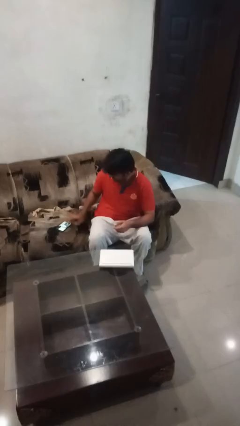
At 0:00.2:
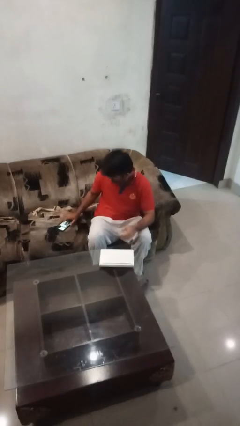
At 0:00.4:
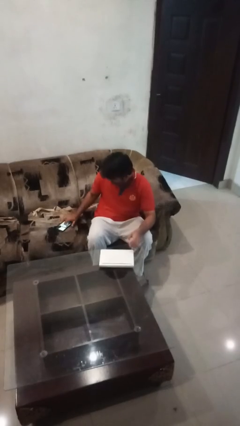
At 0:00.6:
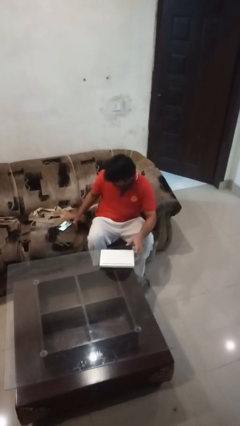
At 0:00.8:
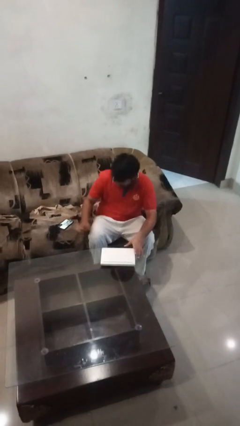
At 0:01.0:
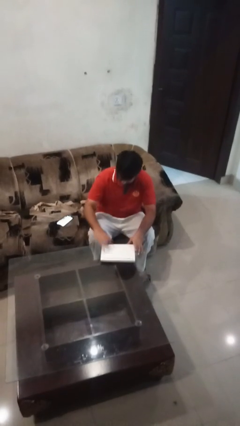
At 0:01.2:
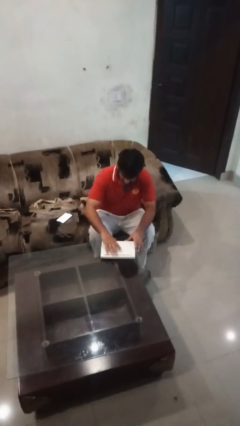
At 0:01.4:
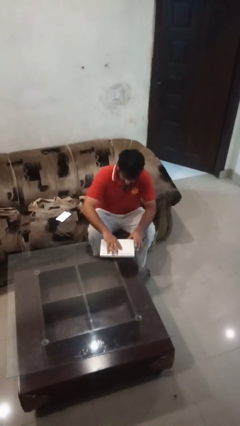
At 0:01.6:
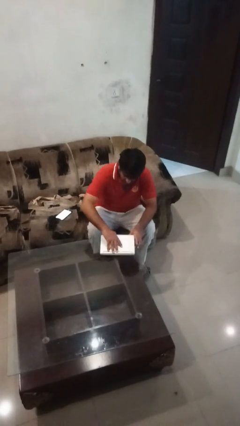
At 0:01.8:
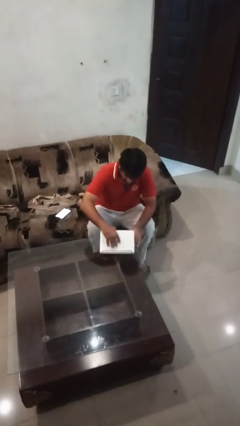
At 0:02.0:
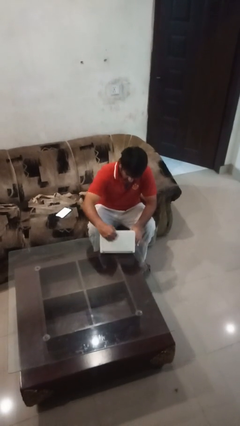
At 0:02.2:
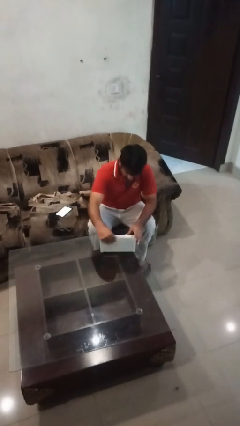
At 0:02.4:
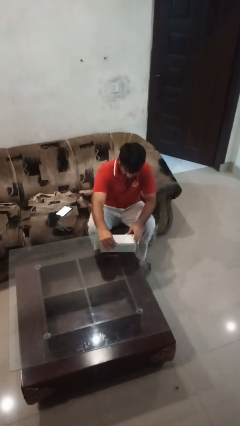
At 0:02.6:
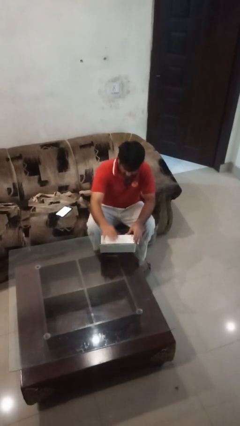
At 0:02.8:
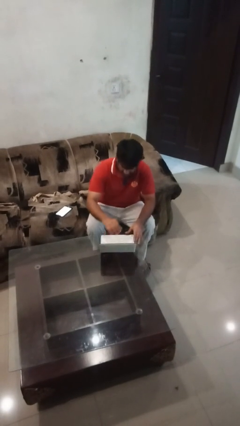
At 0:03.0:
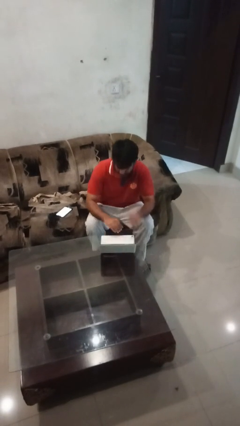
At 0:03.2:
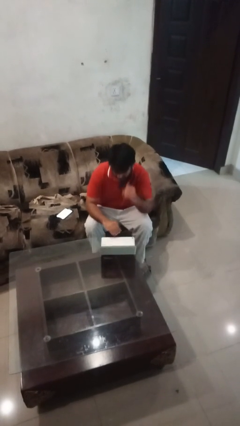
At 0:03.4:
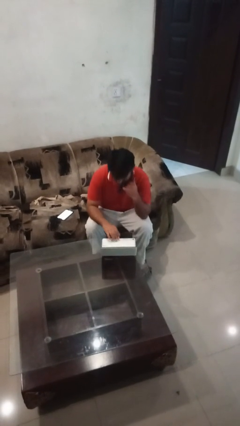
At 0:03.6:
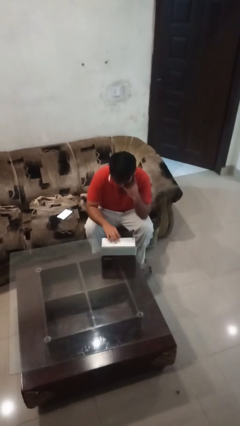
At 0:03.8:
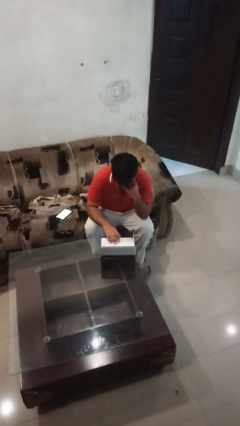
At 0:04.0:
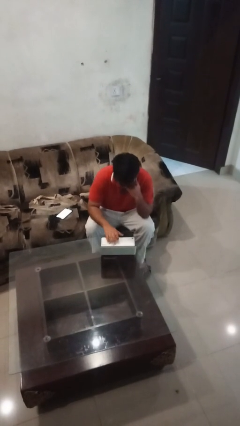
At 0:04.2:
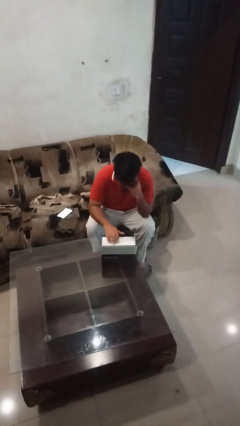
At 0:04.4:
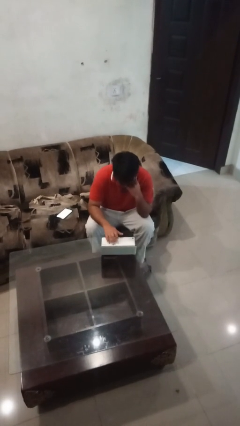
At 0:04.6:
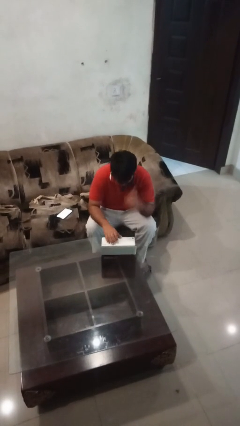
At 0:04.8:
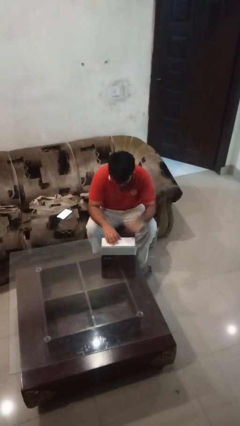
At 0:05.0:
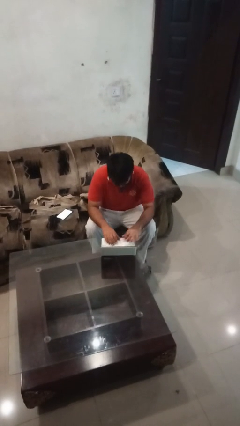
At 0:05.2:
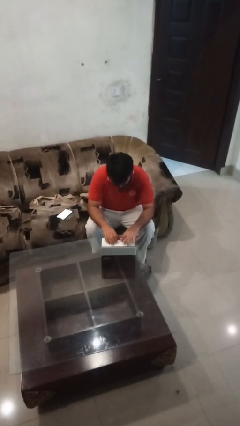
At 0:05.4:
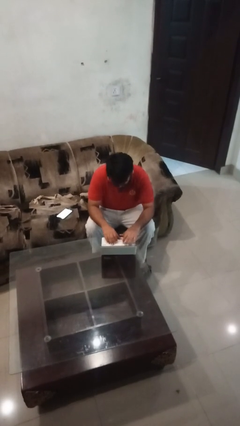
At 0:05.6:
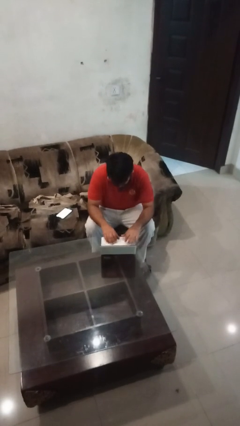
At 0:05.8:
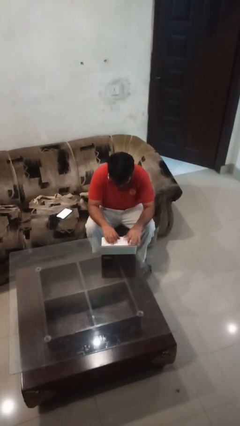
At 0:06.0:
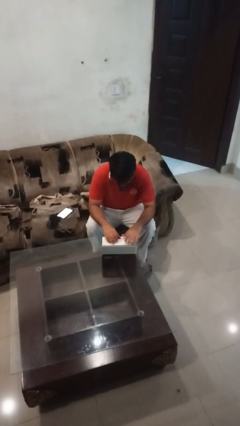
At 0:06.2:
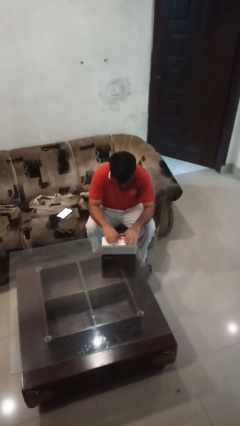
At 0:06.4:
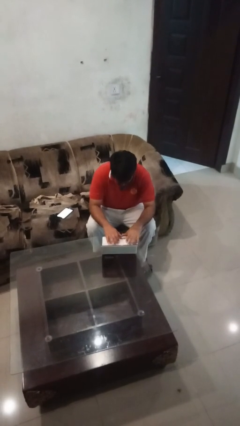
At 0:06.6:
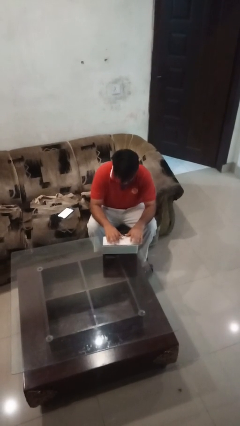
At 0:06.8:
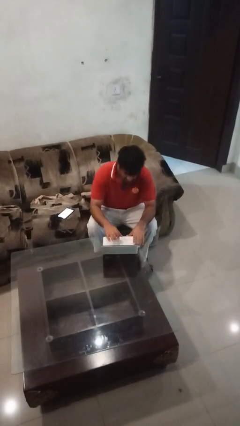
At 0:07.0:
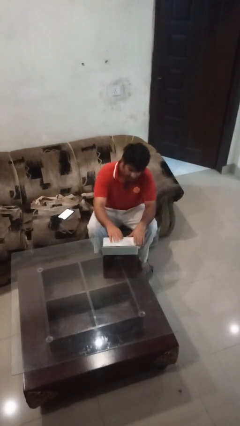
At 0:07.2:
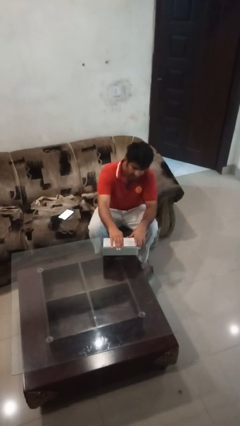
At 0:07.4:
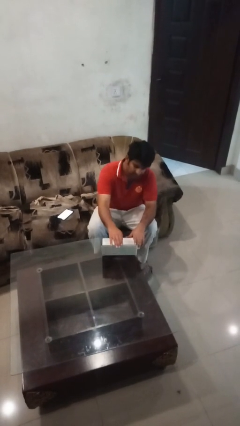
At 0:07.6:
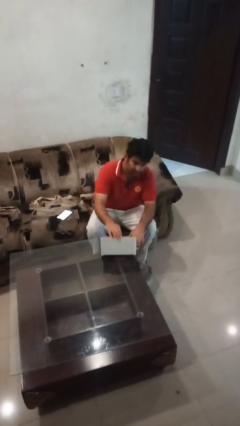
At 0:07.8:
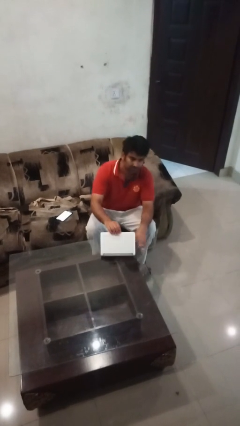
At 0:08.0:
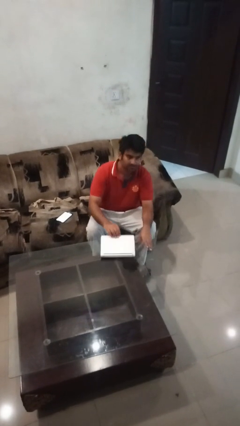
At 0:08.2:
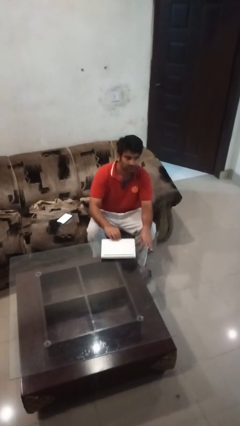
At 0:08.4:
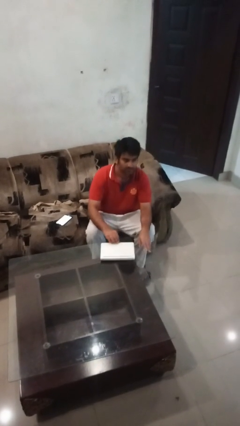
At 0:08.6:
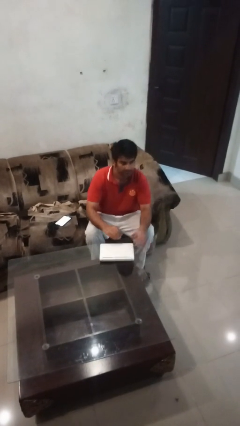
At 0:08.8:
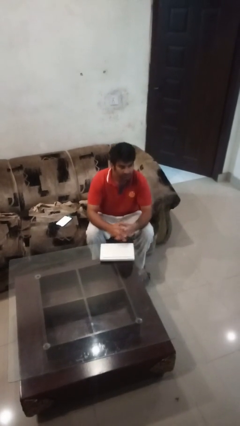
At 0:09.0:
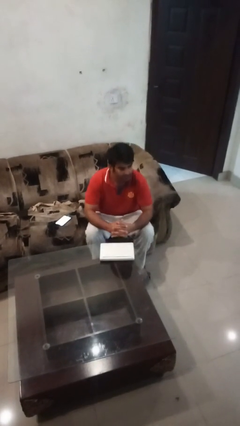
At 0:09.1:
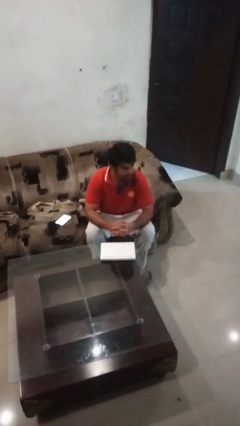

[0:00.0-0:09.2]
person interacts with laptop

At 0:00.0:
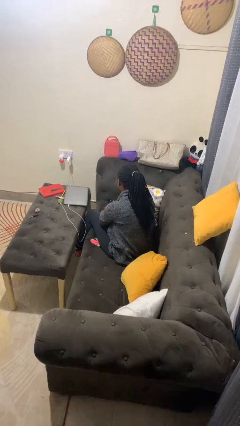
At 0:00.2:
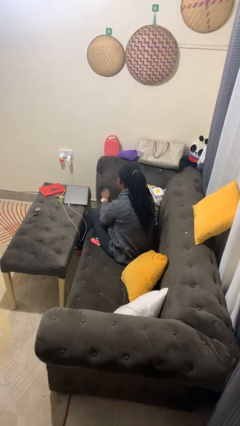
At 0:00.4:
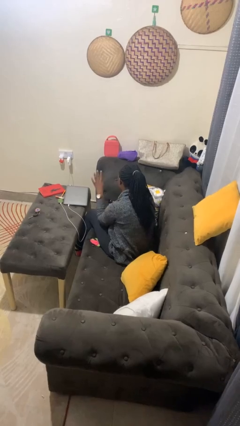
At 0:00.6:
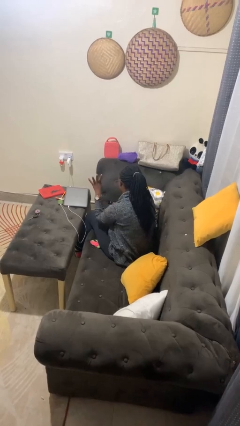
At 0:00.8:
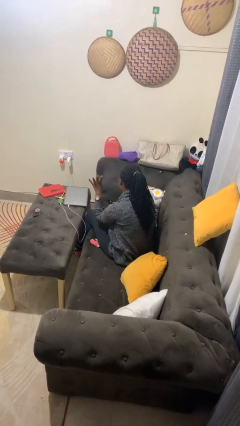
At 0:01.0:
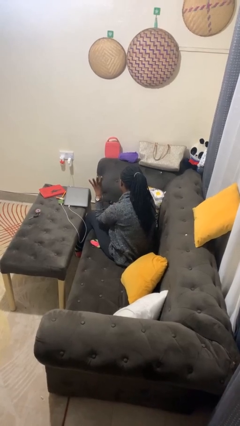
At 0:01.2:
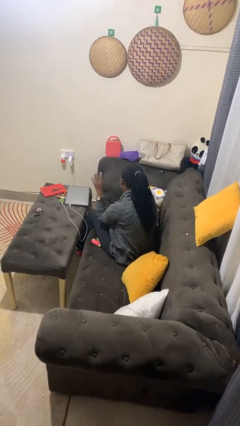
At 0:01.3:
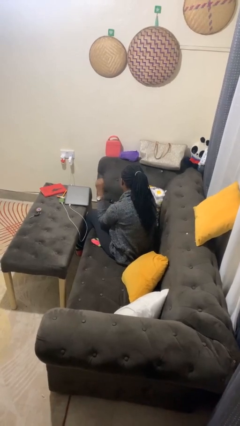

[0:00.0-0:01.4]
person gestures number four

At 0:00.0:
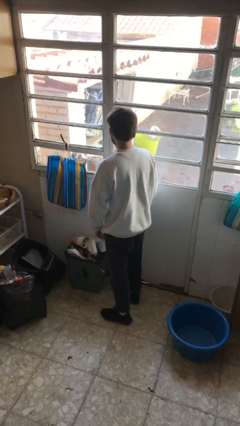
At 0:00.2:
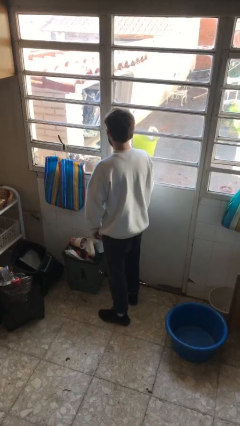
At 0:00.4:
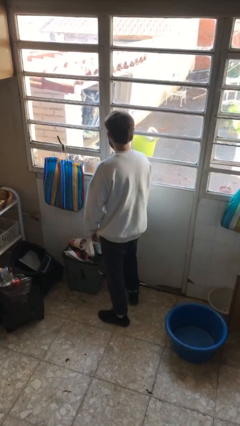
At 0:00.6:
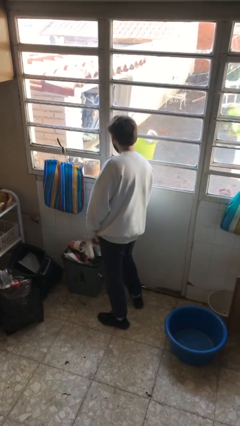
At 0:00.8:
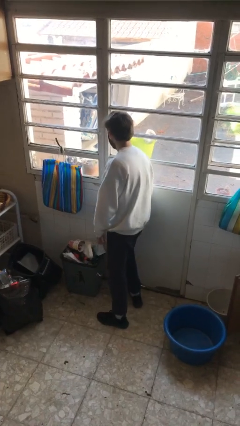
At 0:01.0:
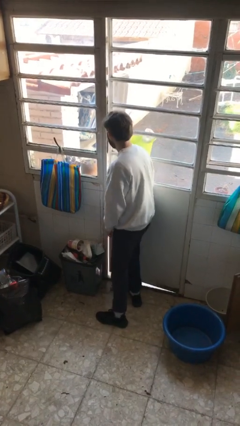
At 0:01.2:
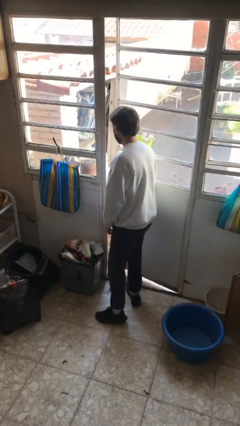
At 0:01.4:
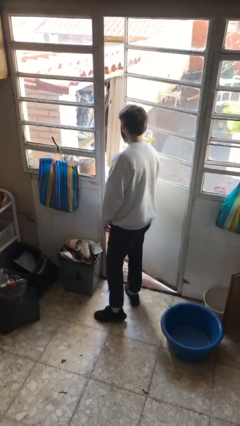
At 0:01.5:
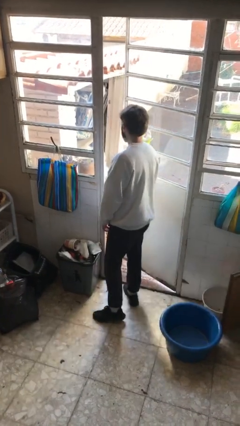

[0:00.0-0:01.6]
person opens facility door

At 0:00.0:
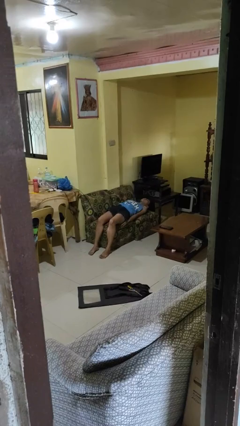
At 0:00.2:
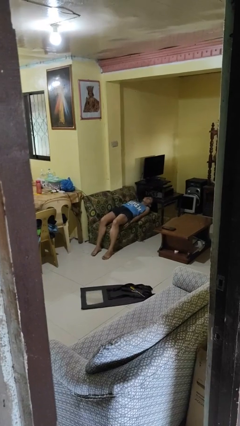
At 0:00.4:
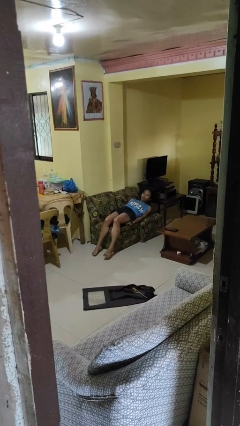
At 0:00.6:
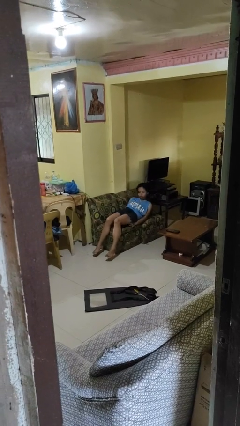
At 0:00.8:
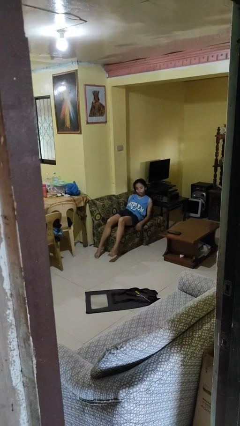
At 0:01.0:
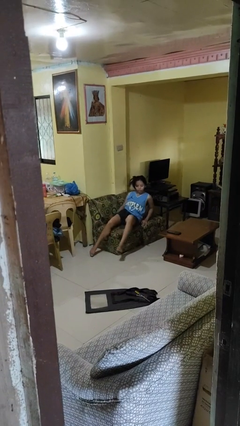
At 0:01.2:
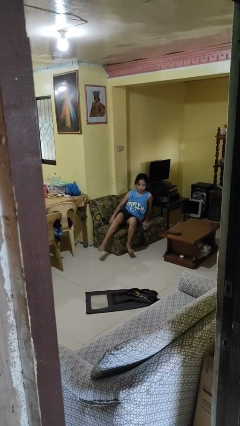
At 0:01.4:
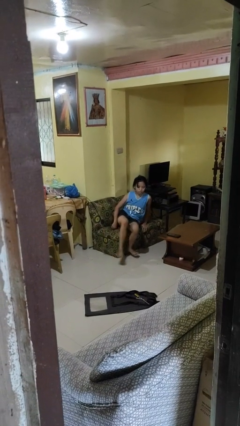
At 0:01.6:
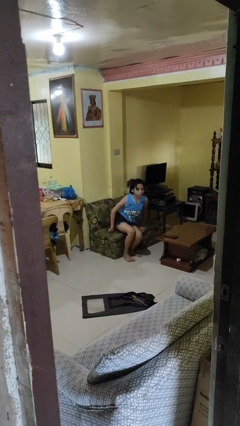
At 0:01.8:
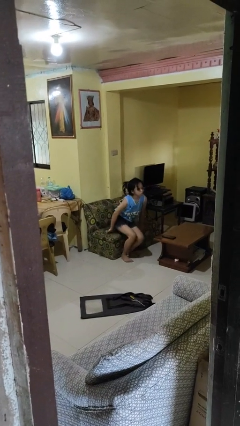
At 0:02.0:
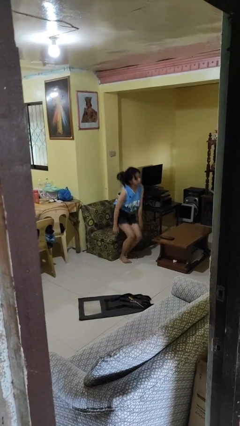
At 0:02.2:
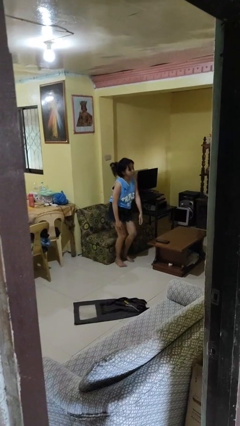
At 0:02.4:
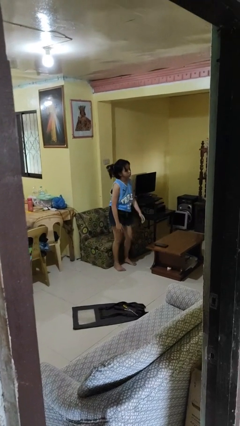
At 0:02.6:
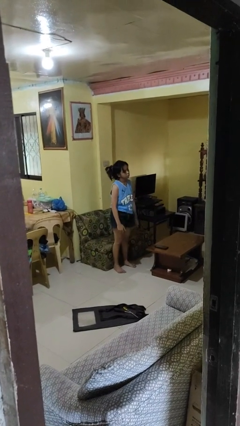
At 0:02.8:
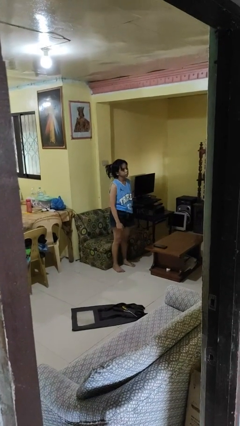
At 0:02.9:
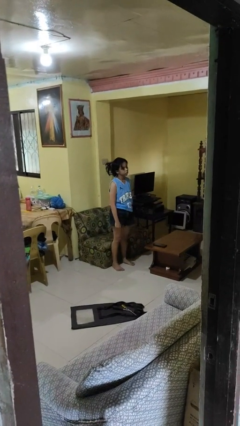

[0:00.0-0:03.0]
person stands up

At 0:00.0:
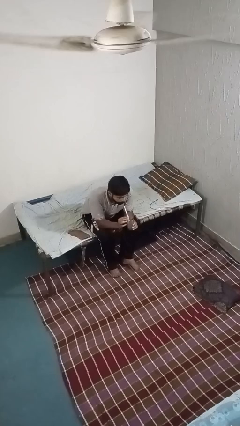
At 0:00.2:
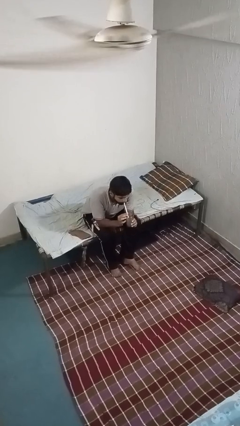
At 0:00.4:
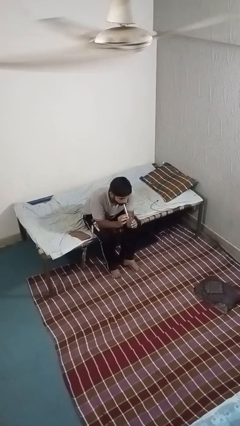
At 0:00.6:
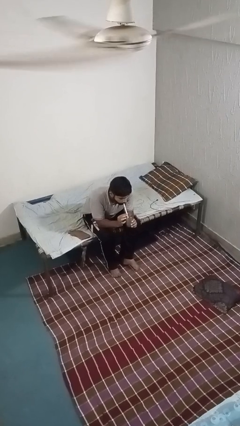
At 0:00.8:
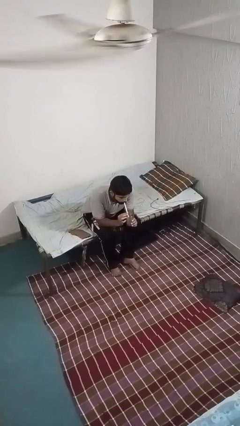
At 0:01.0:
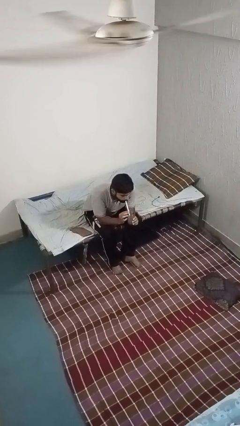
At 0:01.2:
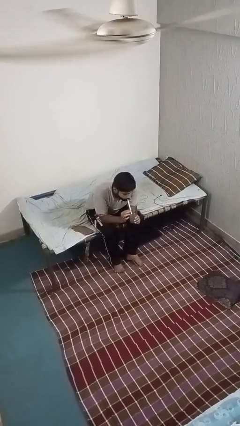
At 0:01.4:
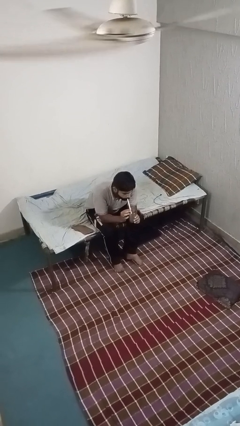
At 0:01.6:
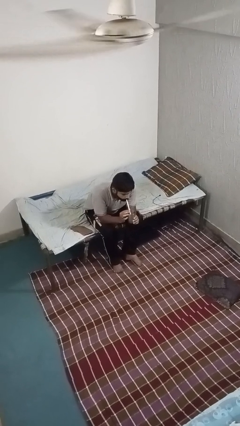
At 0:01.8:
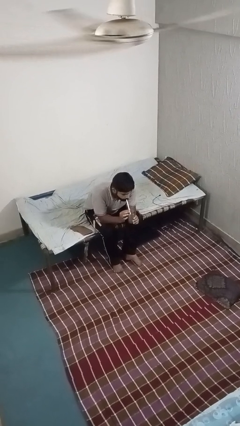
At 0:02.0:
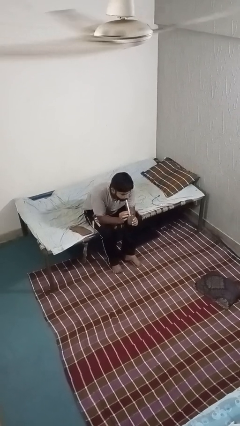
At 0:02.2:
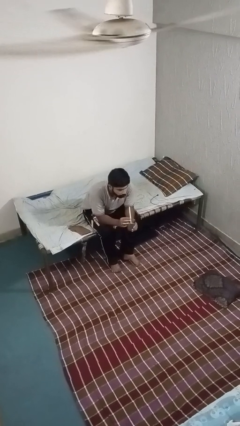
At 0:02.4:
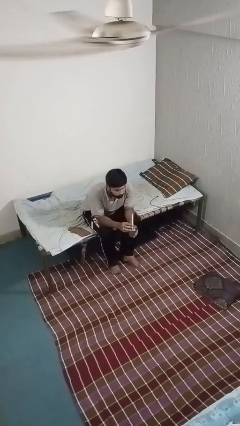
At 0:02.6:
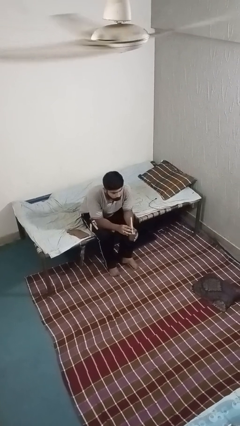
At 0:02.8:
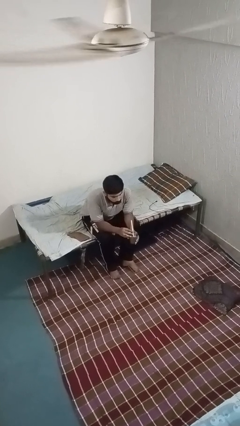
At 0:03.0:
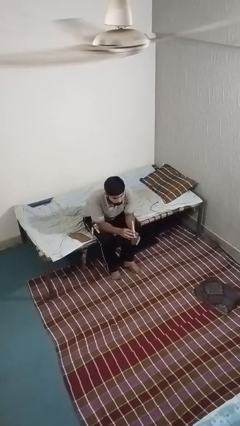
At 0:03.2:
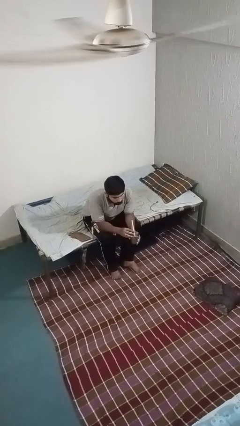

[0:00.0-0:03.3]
person drinks from straw
